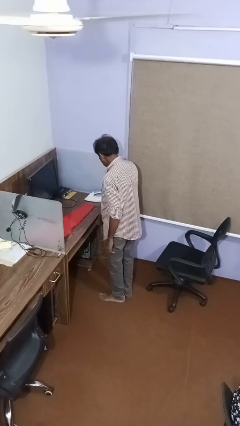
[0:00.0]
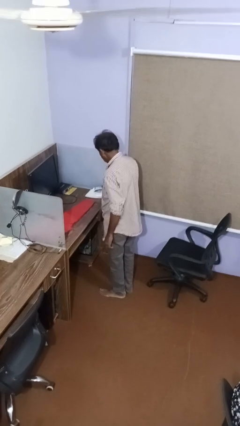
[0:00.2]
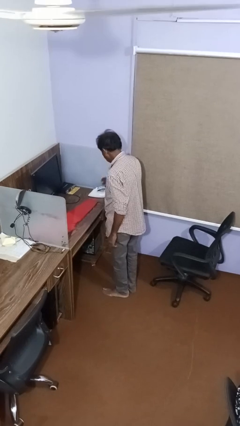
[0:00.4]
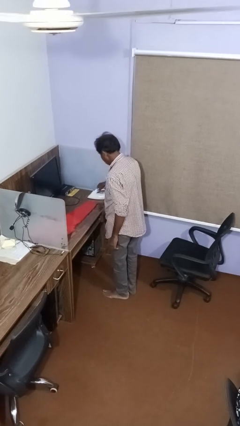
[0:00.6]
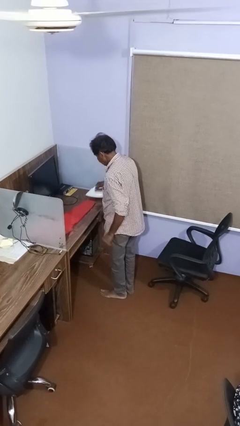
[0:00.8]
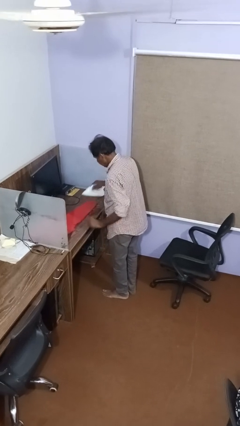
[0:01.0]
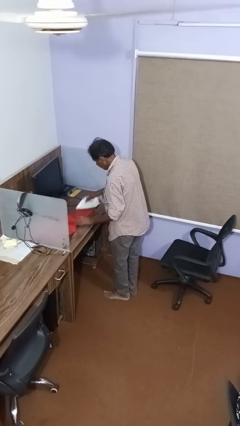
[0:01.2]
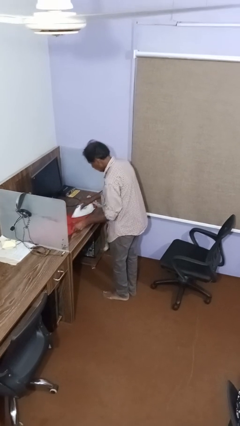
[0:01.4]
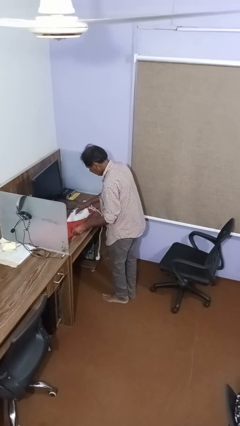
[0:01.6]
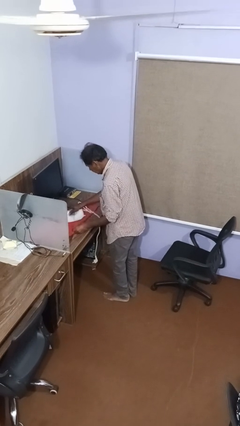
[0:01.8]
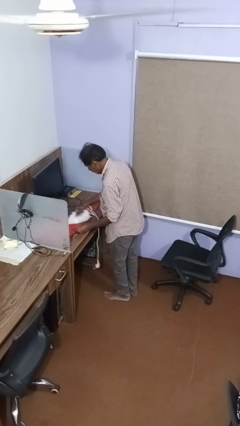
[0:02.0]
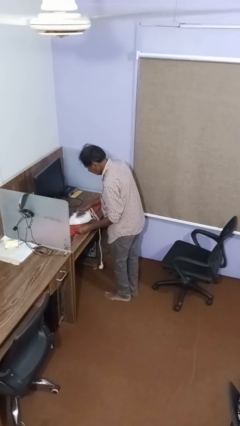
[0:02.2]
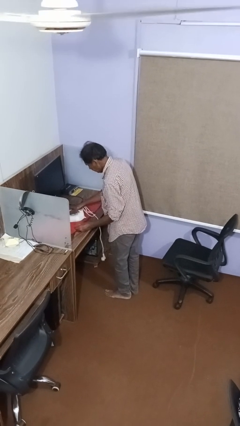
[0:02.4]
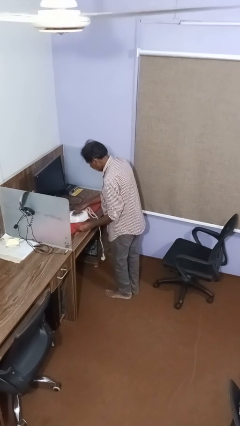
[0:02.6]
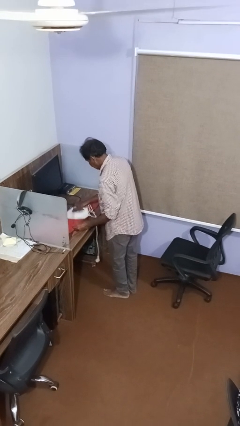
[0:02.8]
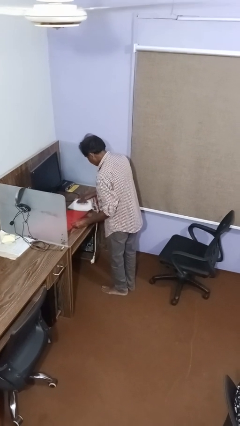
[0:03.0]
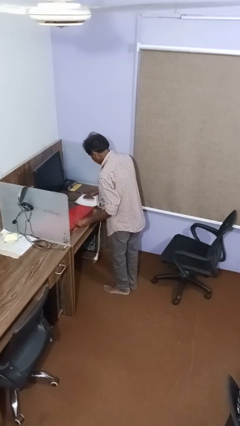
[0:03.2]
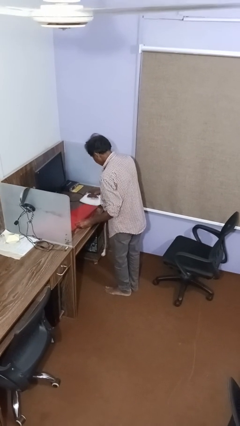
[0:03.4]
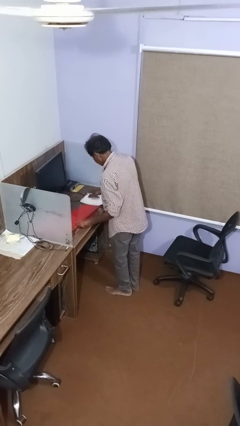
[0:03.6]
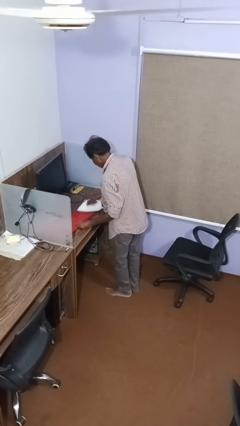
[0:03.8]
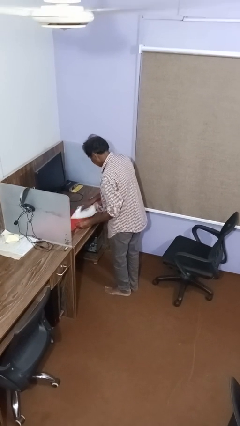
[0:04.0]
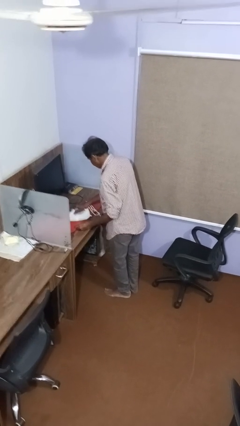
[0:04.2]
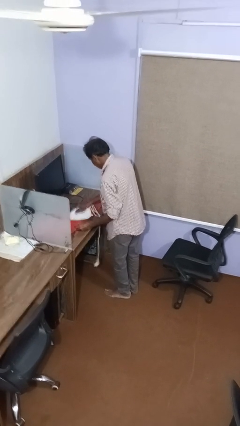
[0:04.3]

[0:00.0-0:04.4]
person irons clothes

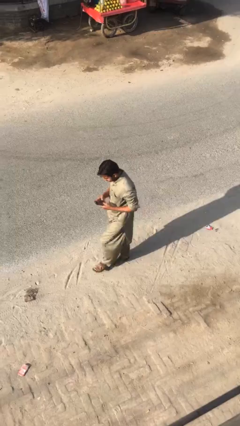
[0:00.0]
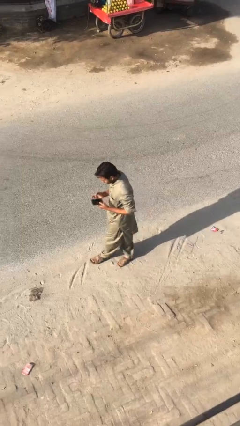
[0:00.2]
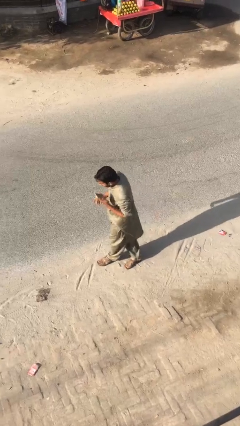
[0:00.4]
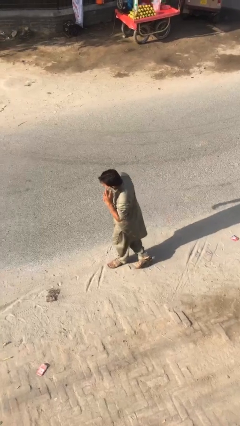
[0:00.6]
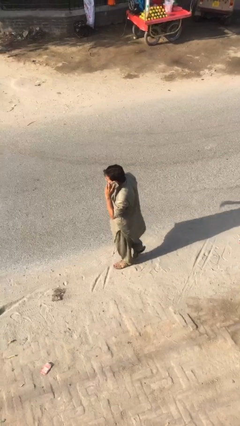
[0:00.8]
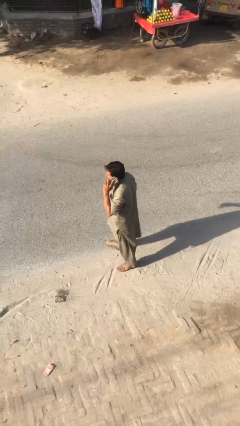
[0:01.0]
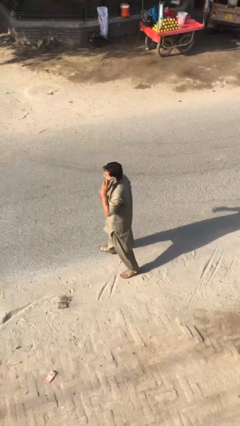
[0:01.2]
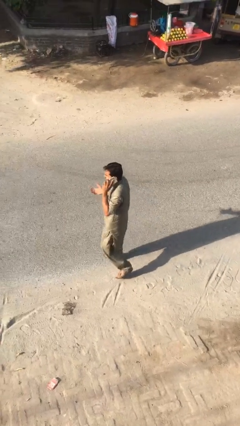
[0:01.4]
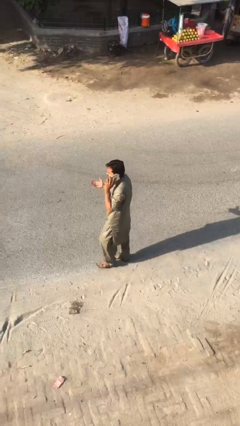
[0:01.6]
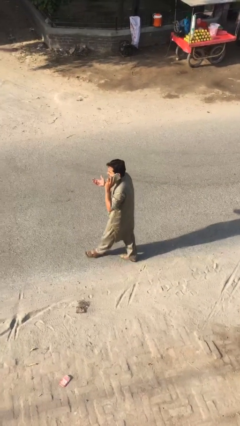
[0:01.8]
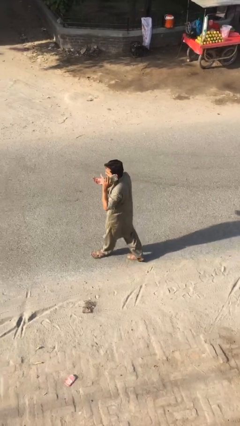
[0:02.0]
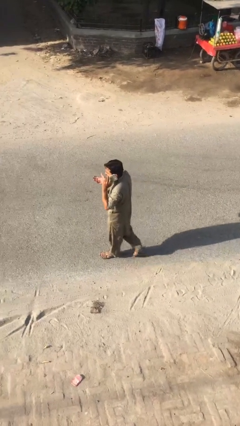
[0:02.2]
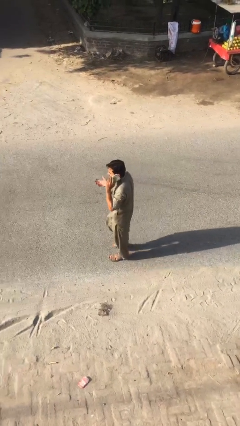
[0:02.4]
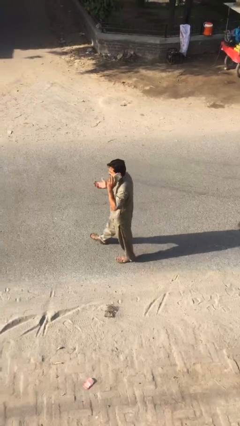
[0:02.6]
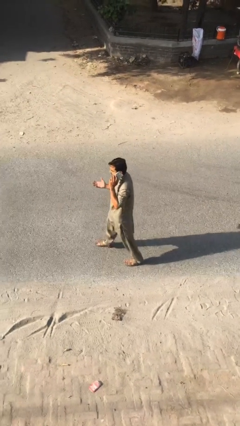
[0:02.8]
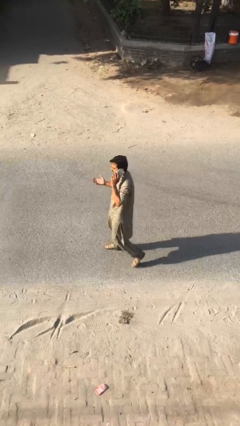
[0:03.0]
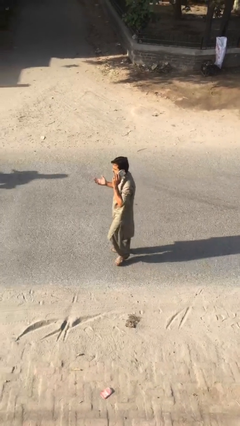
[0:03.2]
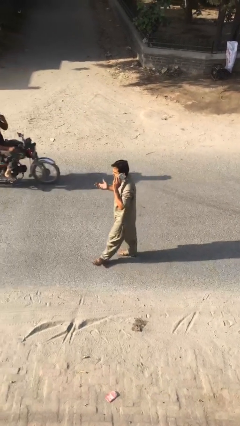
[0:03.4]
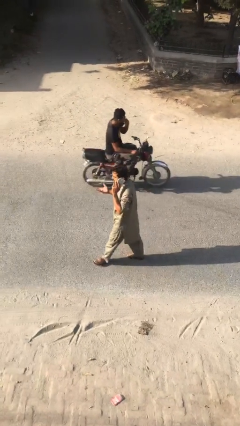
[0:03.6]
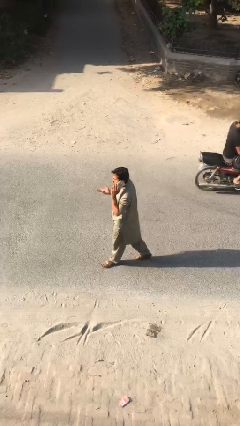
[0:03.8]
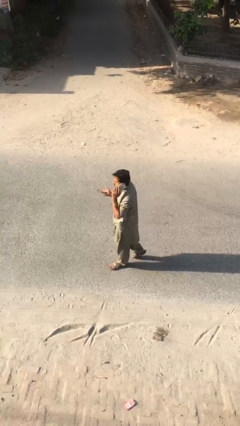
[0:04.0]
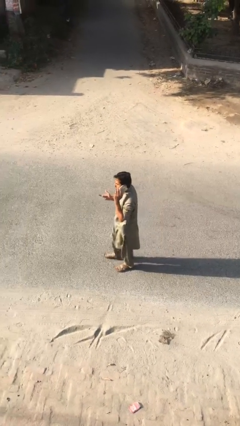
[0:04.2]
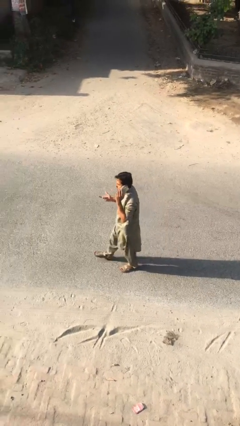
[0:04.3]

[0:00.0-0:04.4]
person talks on phone

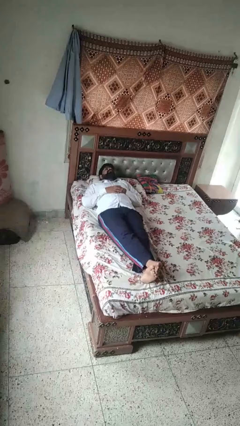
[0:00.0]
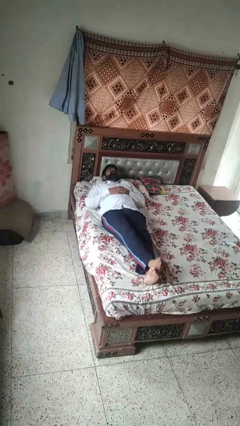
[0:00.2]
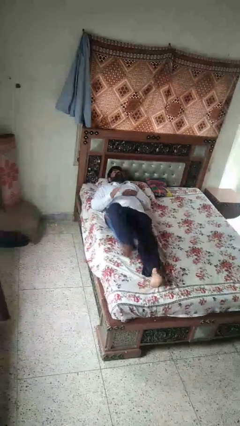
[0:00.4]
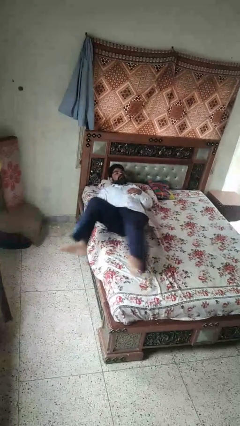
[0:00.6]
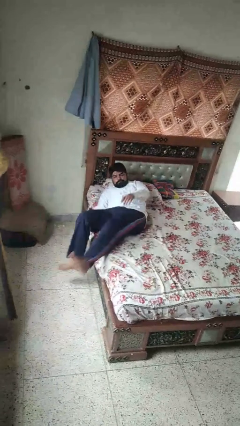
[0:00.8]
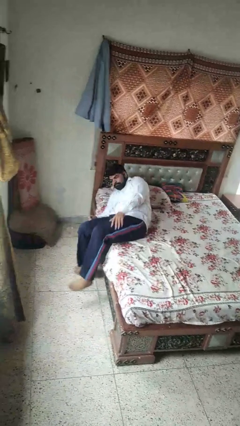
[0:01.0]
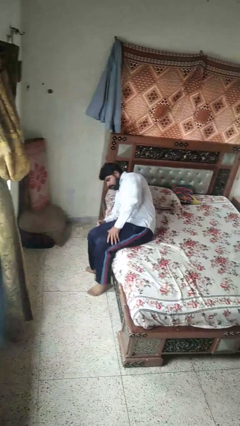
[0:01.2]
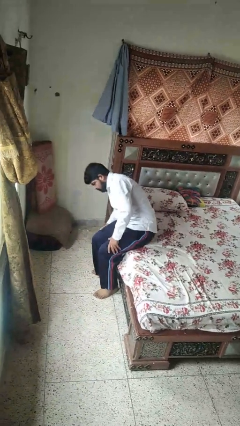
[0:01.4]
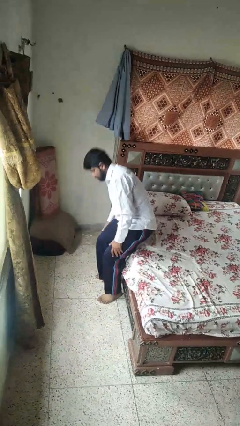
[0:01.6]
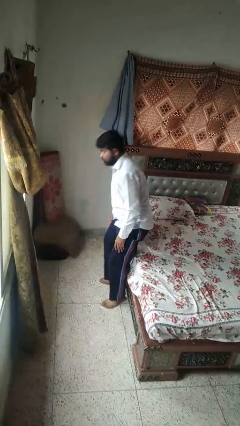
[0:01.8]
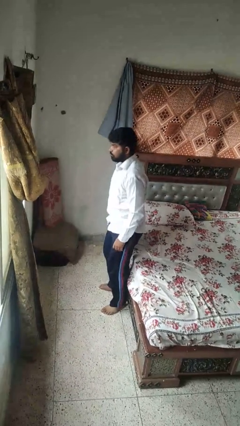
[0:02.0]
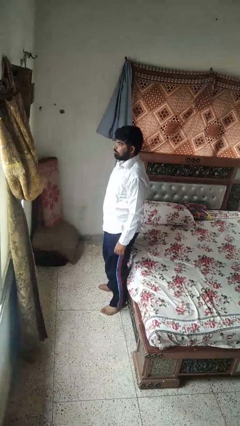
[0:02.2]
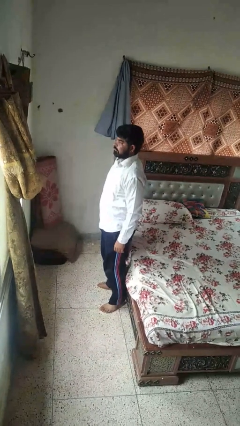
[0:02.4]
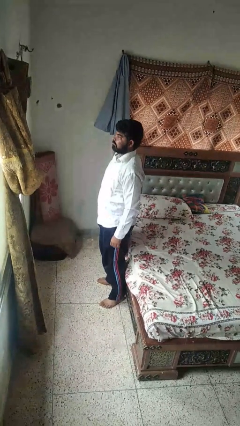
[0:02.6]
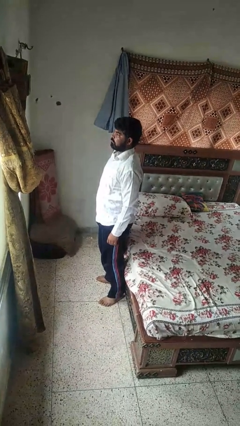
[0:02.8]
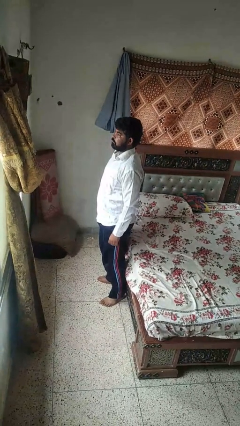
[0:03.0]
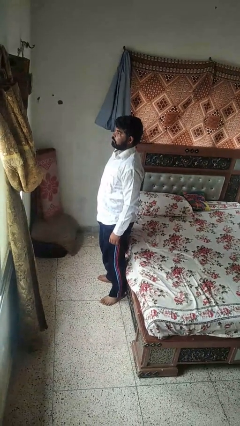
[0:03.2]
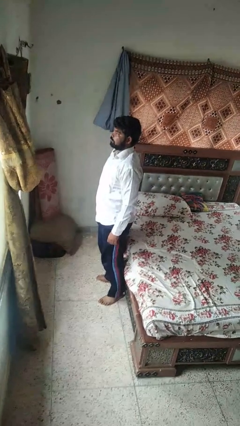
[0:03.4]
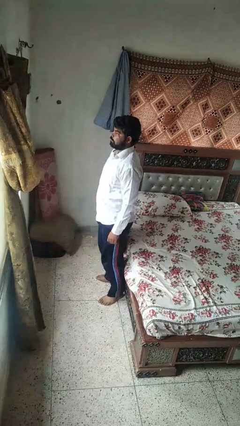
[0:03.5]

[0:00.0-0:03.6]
person stands up

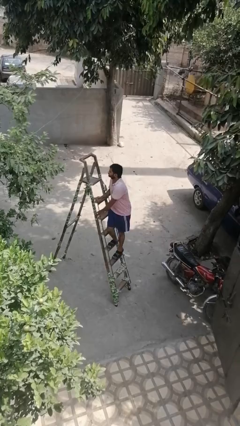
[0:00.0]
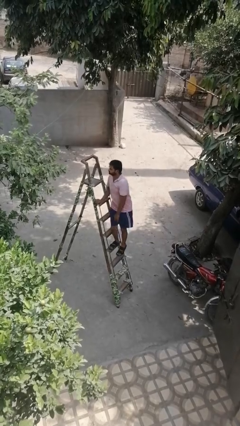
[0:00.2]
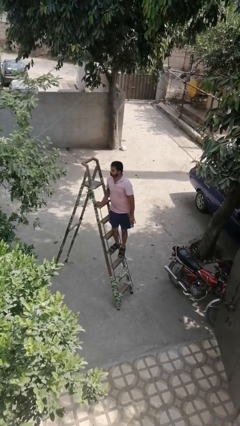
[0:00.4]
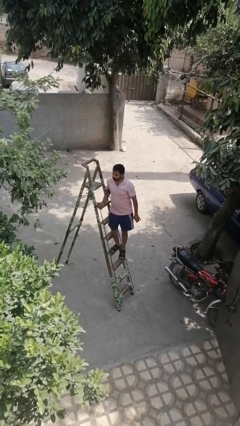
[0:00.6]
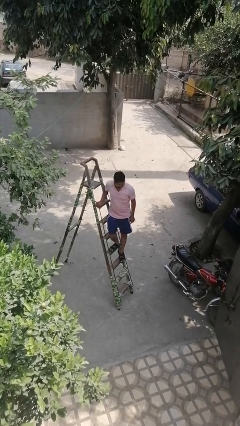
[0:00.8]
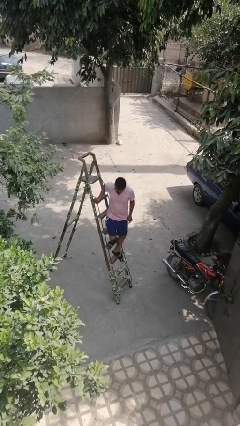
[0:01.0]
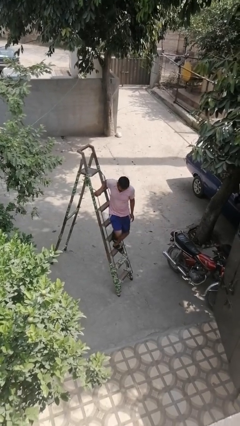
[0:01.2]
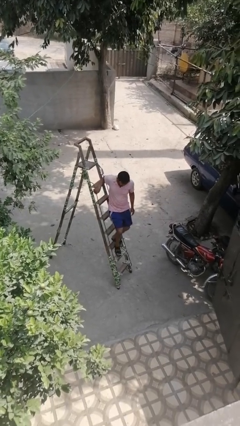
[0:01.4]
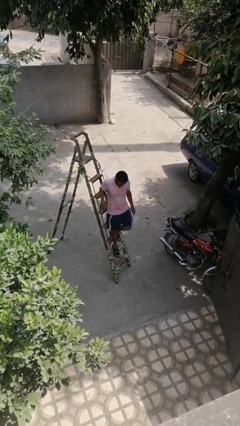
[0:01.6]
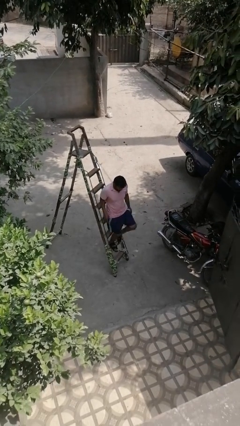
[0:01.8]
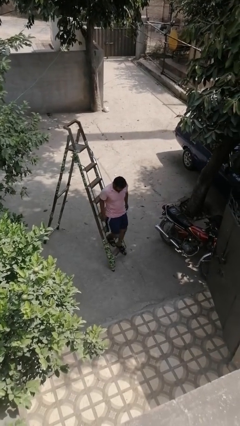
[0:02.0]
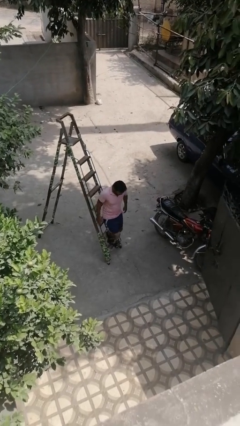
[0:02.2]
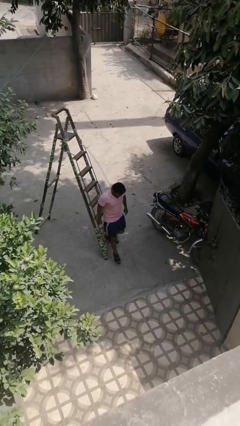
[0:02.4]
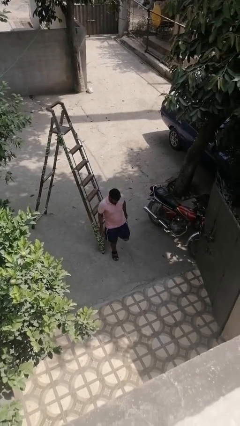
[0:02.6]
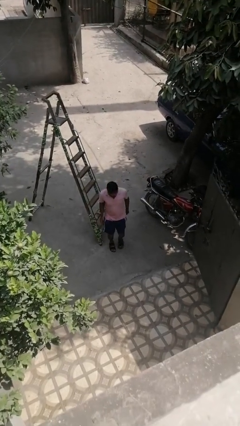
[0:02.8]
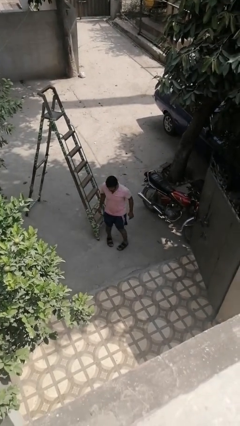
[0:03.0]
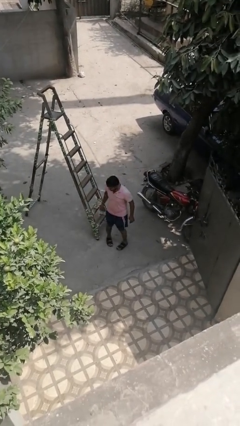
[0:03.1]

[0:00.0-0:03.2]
person climbs down ladder

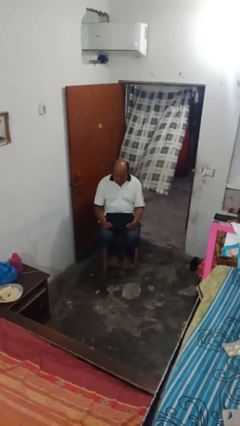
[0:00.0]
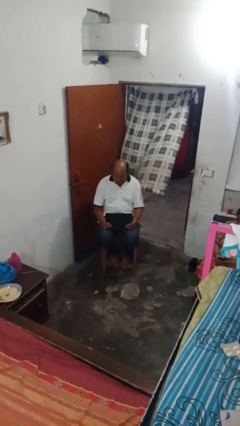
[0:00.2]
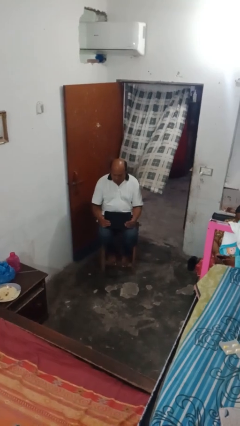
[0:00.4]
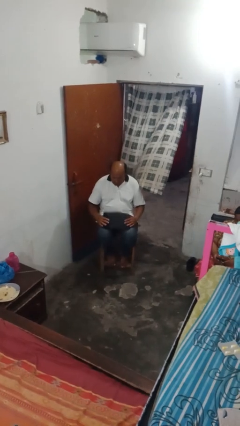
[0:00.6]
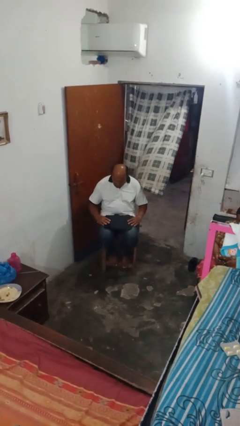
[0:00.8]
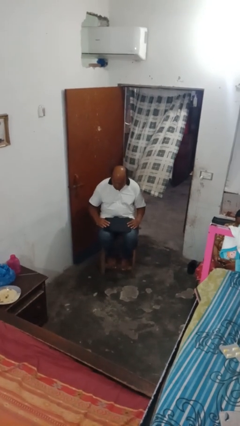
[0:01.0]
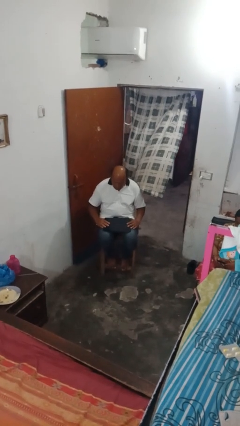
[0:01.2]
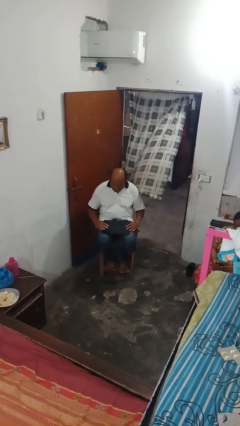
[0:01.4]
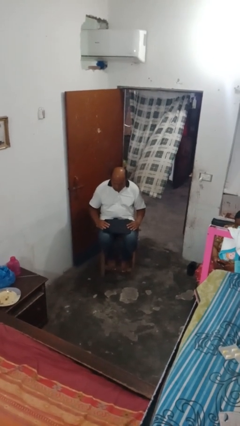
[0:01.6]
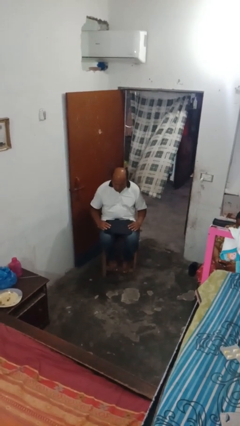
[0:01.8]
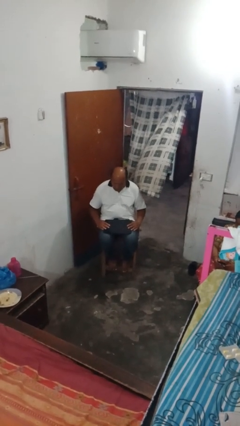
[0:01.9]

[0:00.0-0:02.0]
person closes laptop
